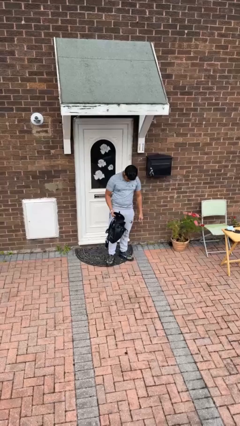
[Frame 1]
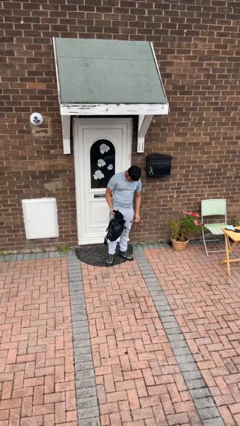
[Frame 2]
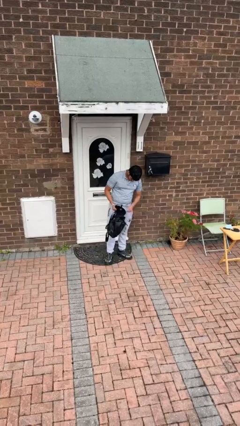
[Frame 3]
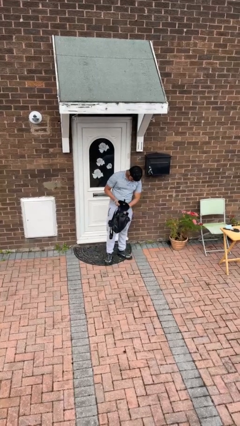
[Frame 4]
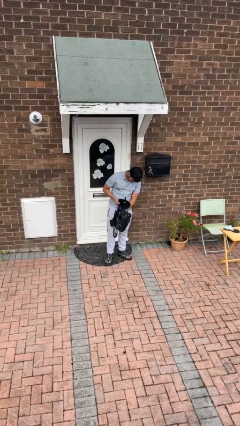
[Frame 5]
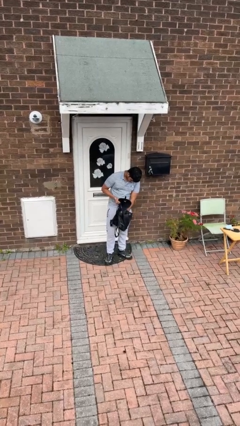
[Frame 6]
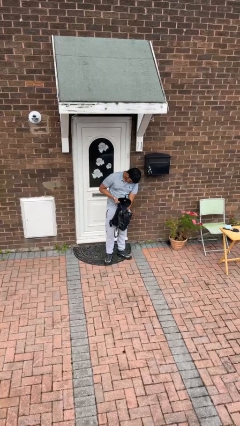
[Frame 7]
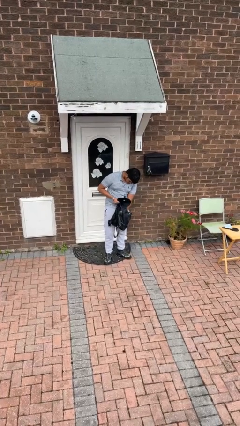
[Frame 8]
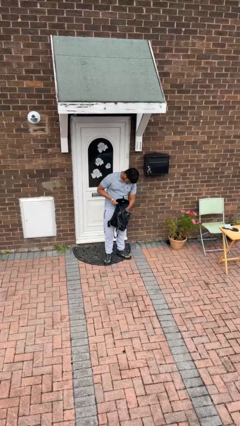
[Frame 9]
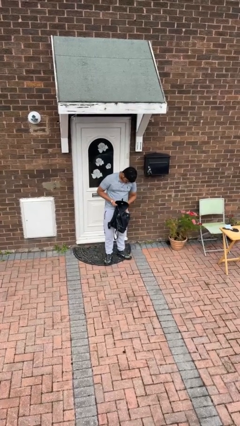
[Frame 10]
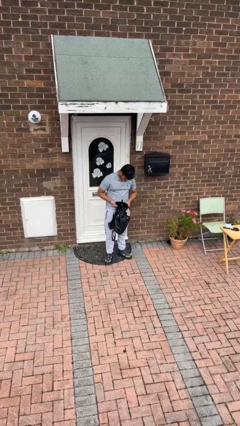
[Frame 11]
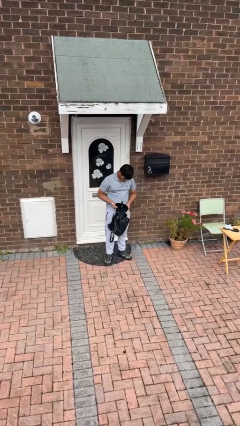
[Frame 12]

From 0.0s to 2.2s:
person searches in backpack

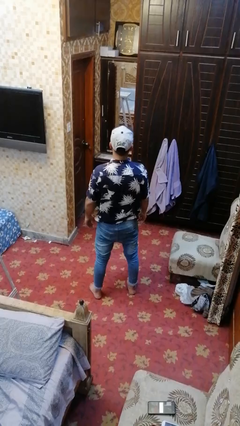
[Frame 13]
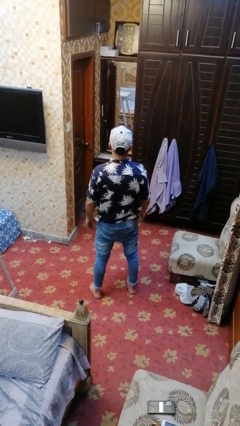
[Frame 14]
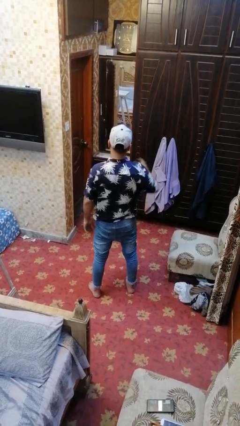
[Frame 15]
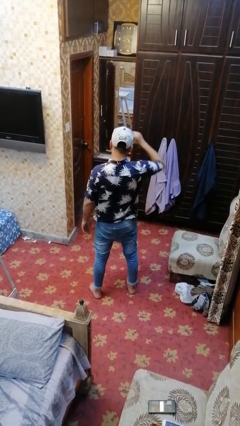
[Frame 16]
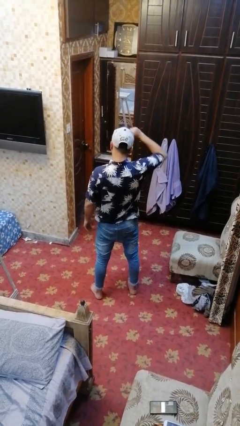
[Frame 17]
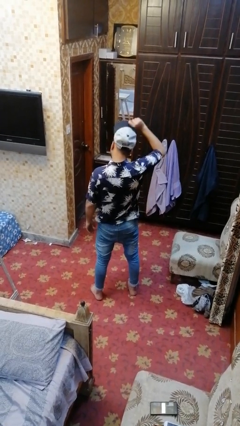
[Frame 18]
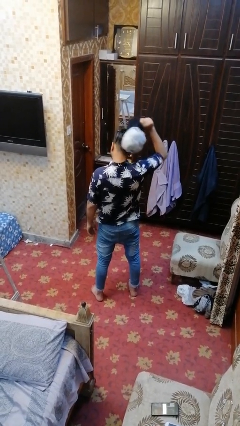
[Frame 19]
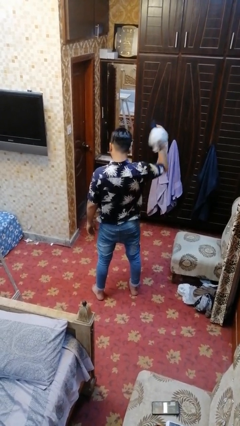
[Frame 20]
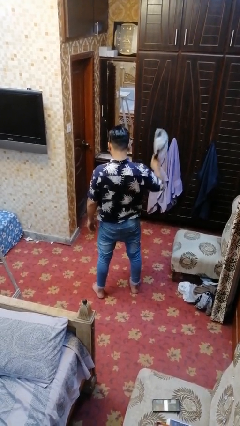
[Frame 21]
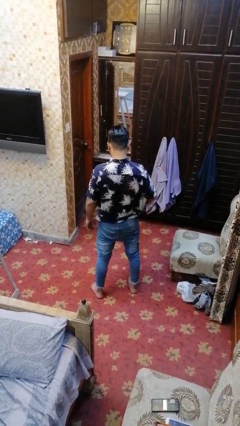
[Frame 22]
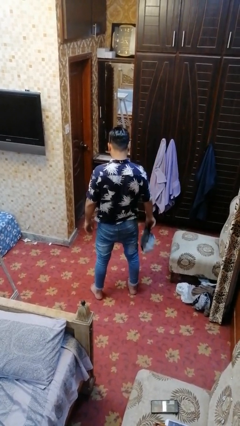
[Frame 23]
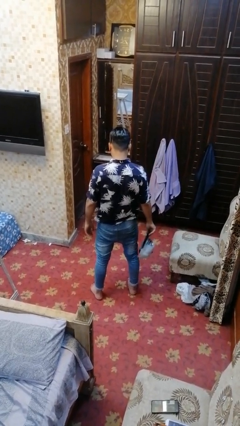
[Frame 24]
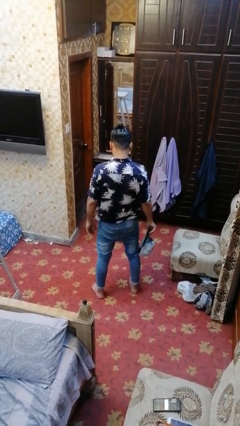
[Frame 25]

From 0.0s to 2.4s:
person takes off hat

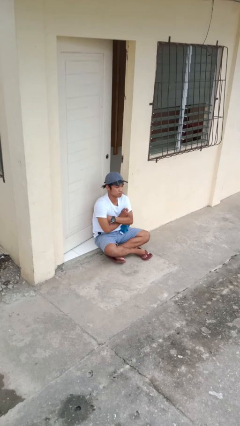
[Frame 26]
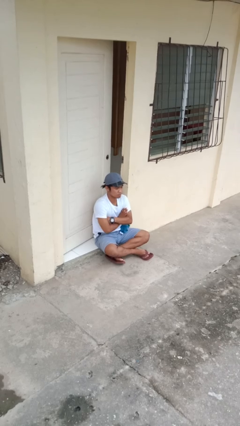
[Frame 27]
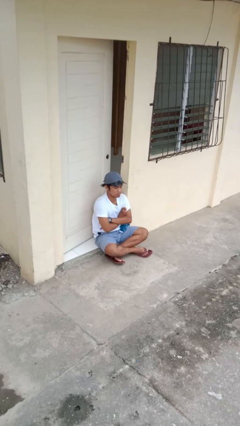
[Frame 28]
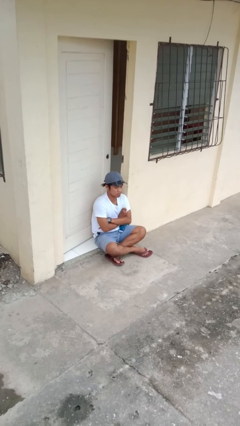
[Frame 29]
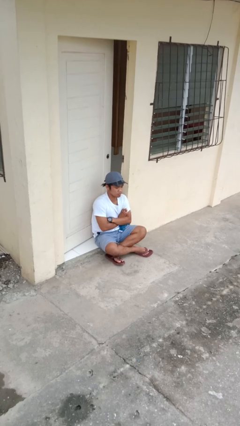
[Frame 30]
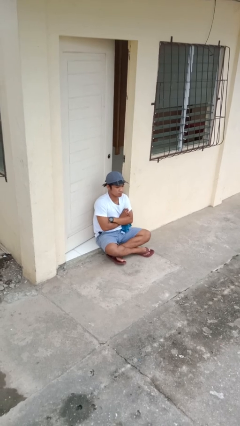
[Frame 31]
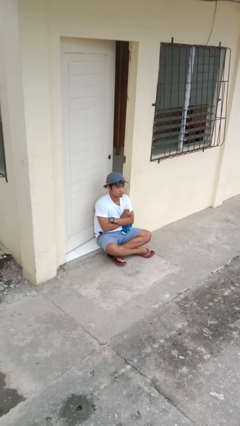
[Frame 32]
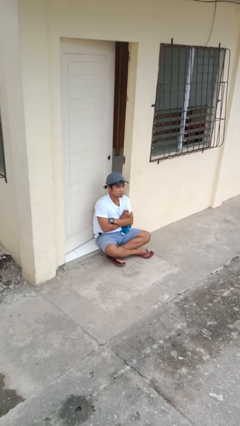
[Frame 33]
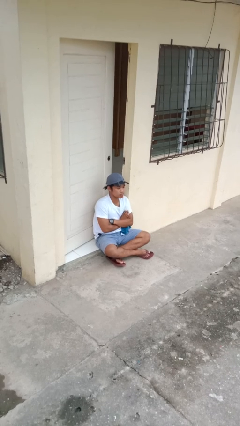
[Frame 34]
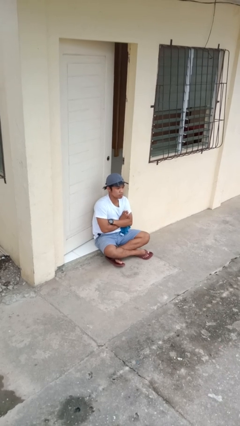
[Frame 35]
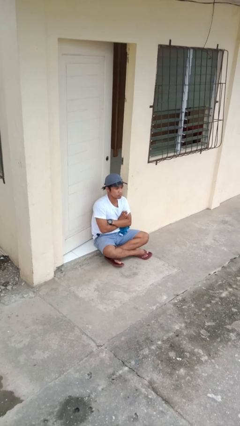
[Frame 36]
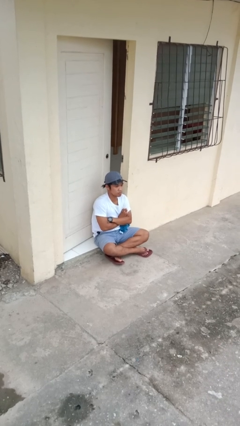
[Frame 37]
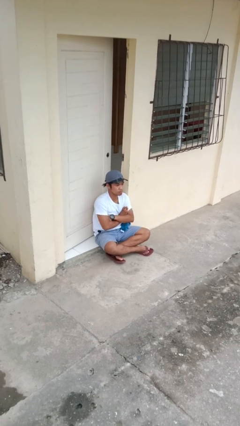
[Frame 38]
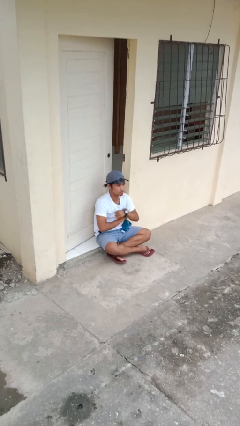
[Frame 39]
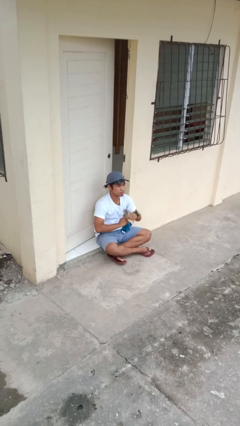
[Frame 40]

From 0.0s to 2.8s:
person crosses arms

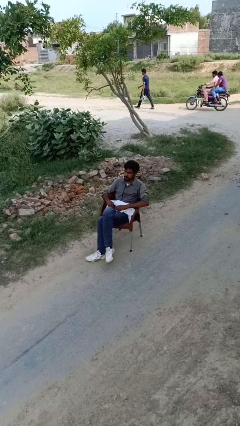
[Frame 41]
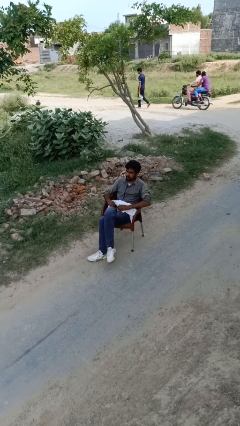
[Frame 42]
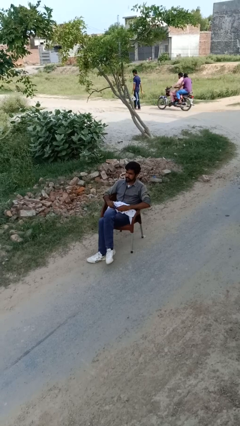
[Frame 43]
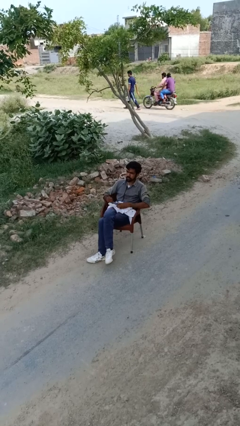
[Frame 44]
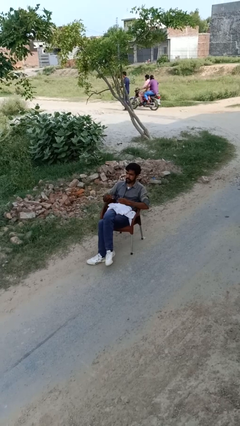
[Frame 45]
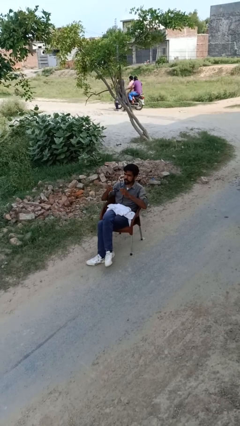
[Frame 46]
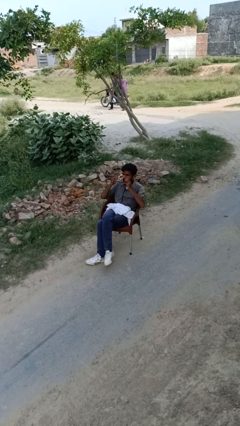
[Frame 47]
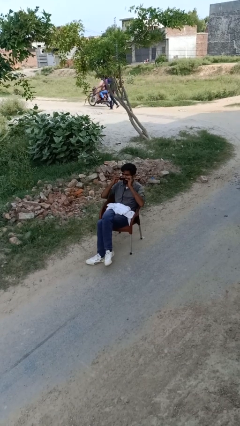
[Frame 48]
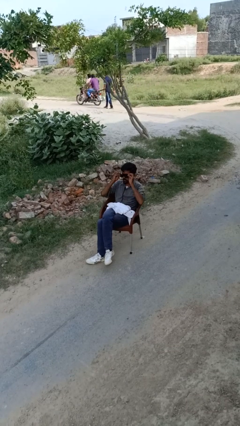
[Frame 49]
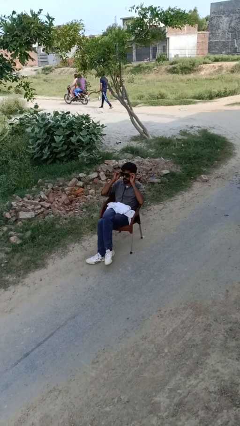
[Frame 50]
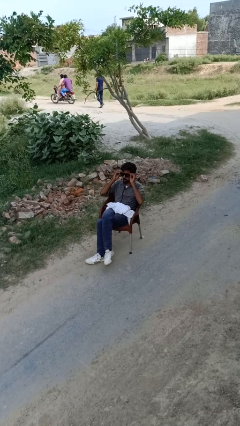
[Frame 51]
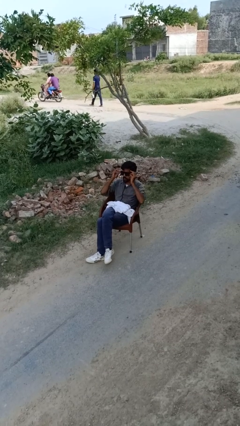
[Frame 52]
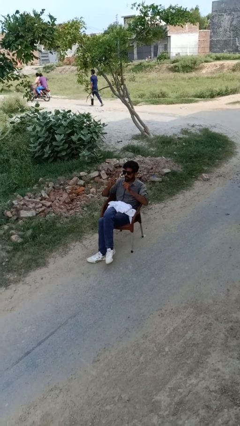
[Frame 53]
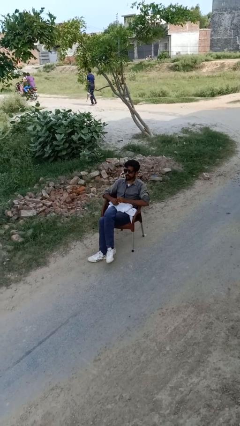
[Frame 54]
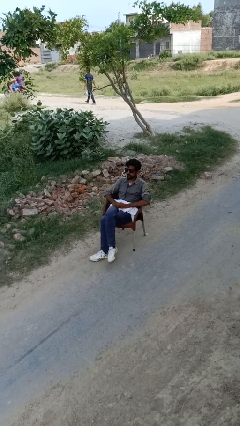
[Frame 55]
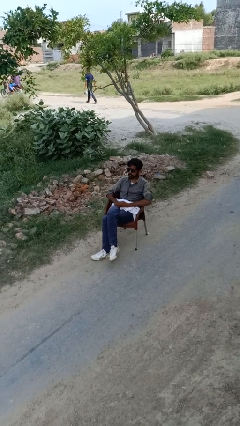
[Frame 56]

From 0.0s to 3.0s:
person puts on glasses

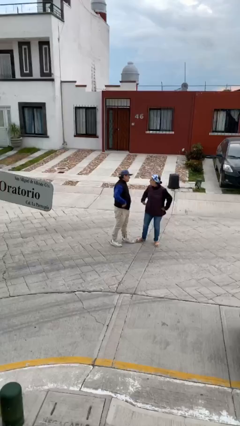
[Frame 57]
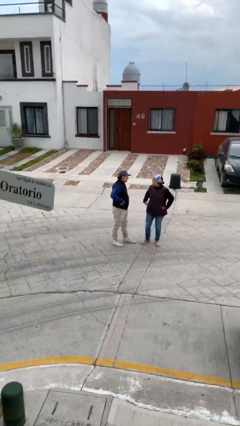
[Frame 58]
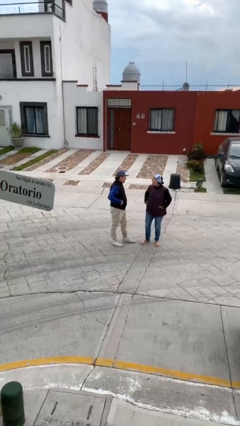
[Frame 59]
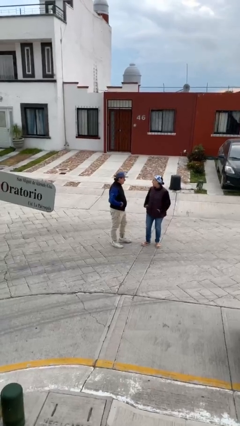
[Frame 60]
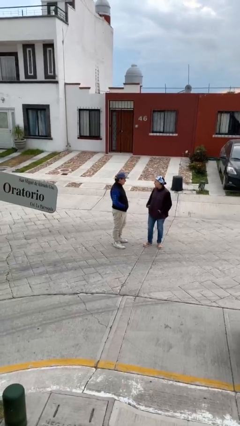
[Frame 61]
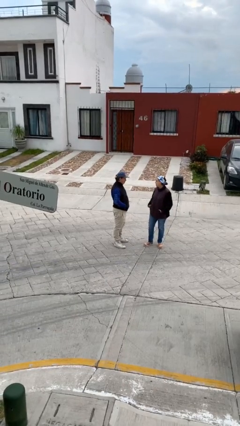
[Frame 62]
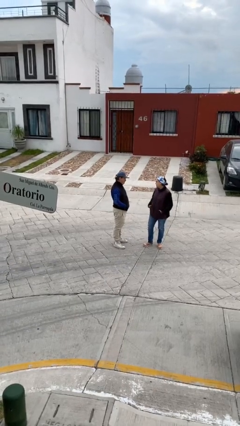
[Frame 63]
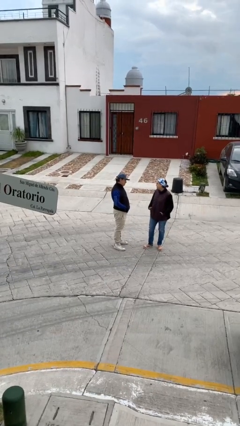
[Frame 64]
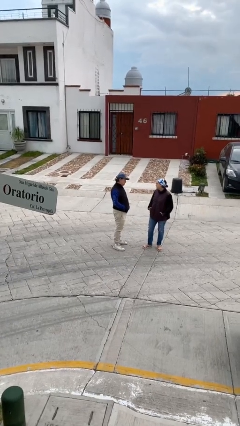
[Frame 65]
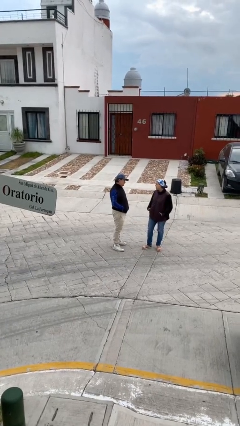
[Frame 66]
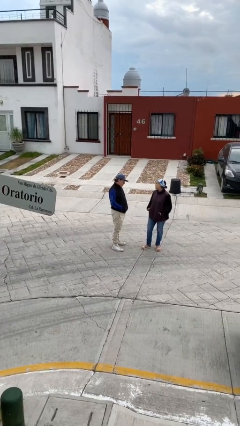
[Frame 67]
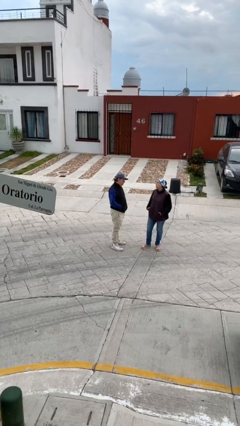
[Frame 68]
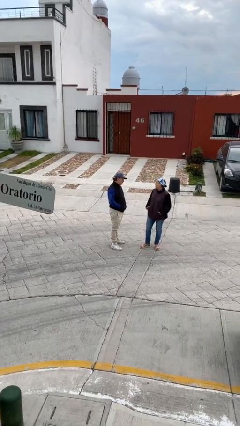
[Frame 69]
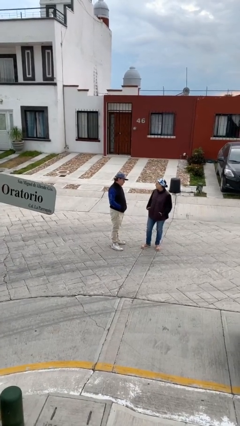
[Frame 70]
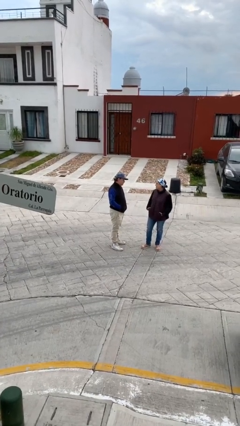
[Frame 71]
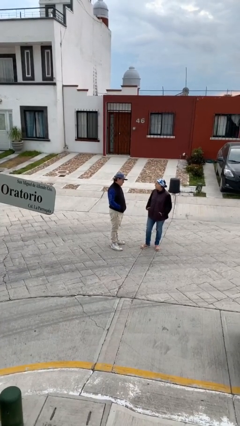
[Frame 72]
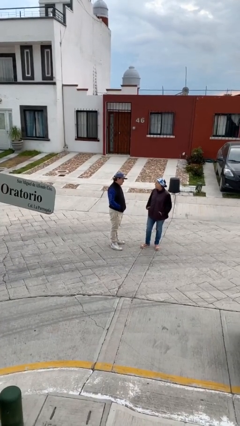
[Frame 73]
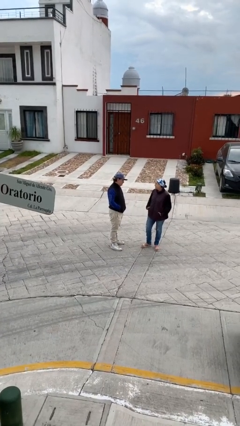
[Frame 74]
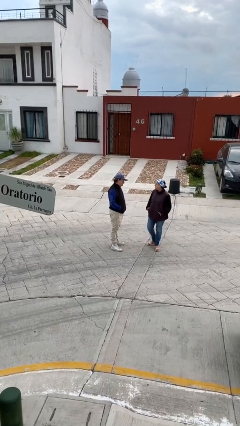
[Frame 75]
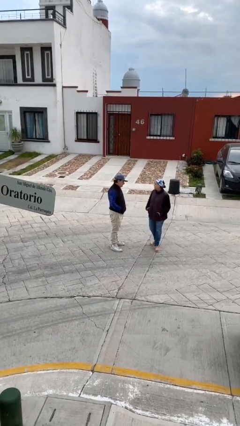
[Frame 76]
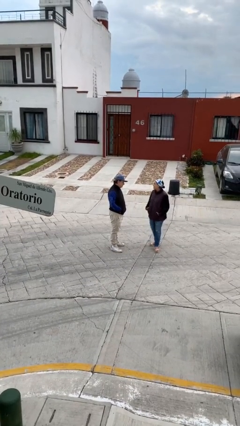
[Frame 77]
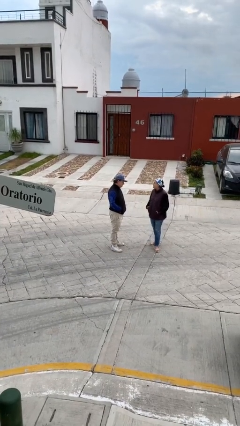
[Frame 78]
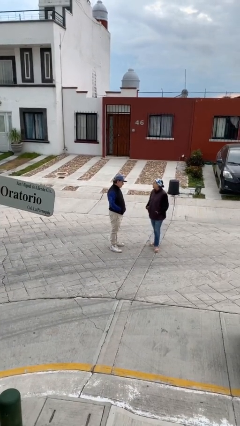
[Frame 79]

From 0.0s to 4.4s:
person talks to person

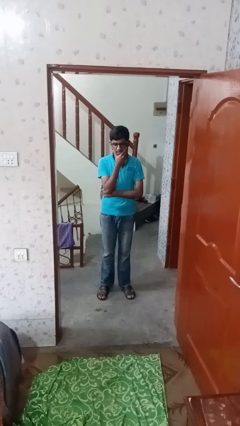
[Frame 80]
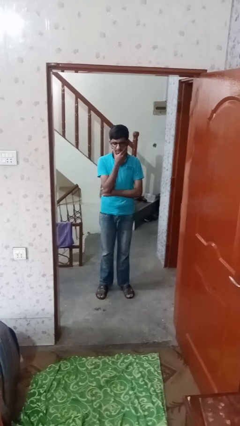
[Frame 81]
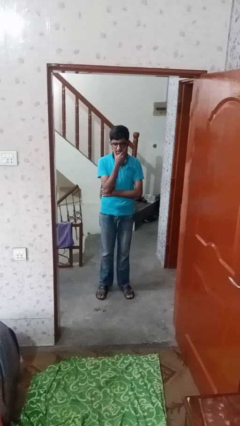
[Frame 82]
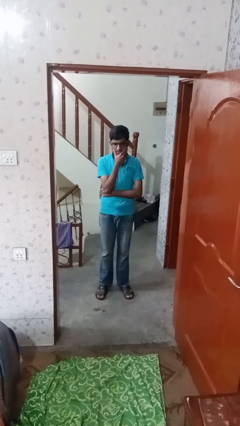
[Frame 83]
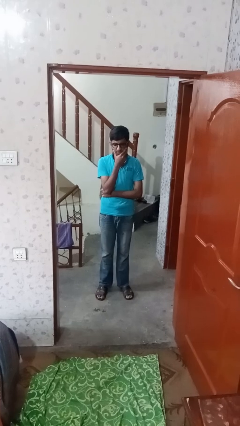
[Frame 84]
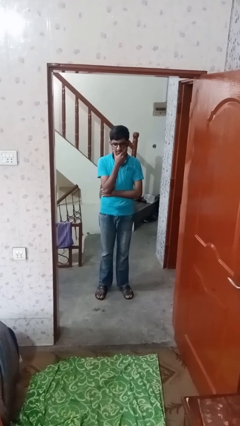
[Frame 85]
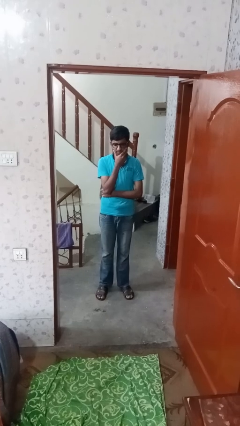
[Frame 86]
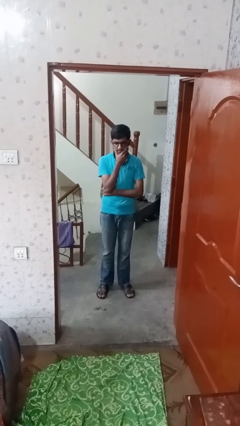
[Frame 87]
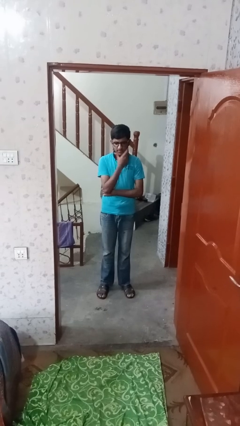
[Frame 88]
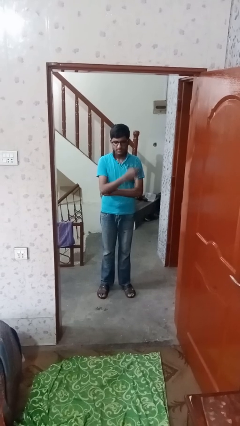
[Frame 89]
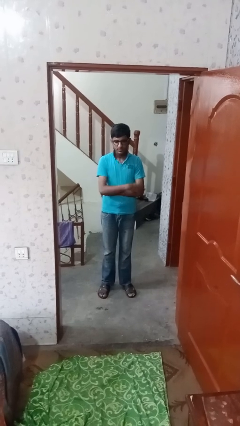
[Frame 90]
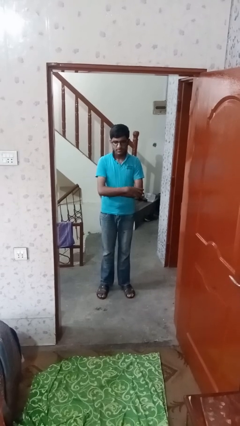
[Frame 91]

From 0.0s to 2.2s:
person strokes chin

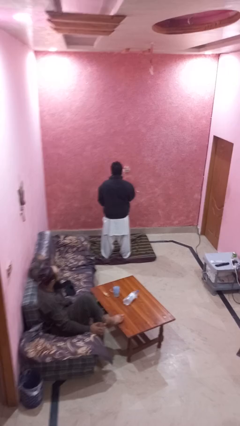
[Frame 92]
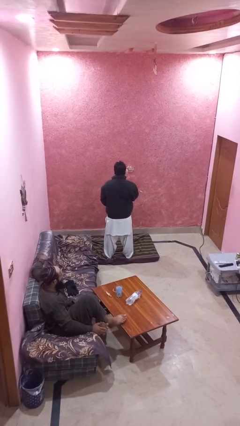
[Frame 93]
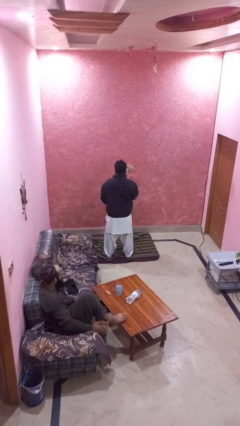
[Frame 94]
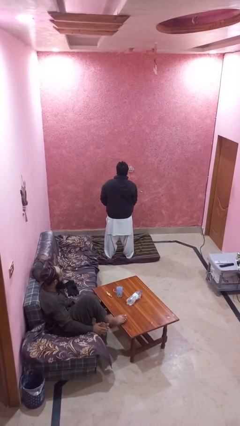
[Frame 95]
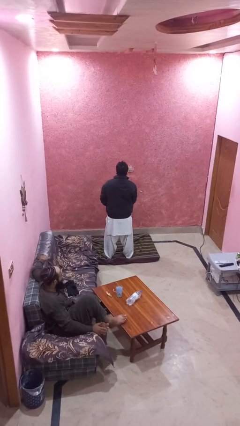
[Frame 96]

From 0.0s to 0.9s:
person unzips jacket
